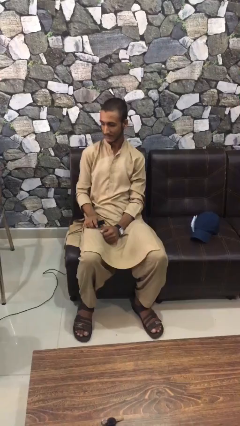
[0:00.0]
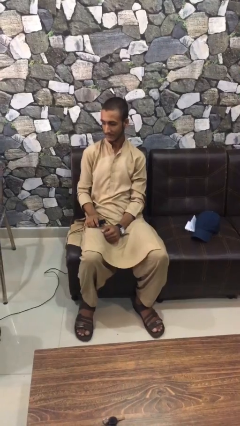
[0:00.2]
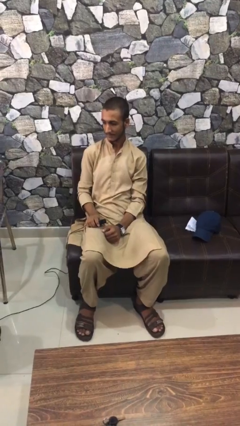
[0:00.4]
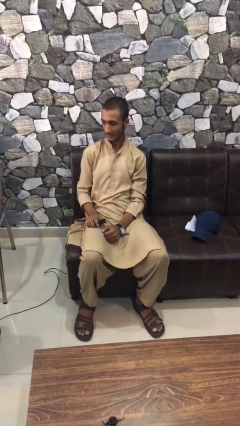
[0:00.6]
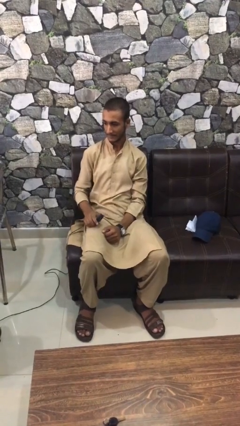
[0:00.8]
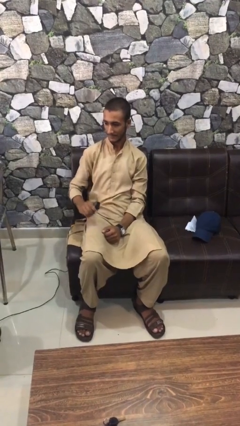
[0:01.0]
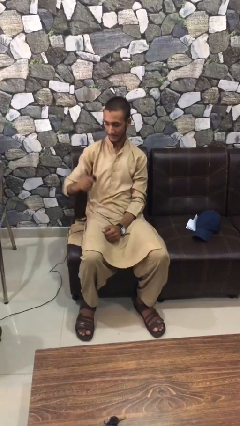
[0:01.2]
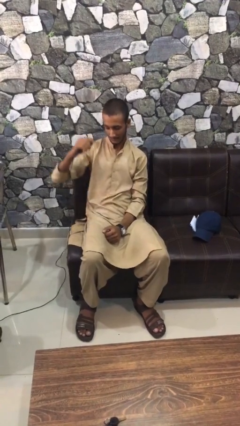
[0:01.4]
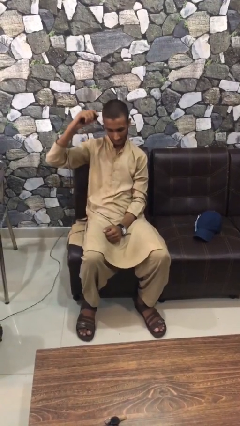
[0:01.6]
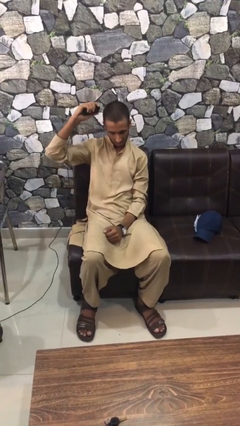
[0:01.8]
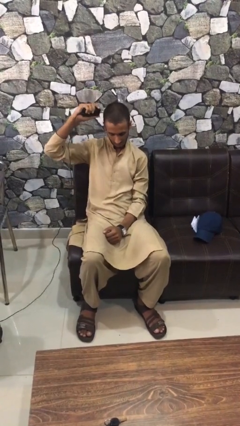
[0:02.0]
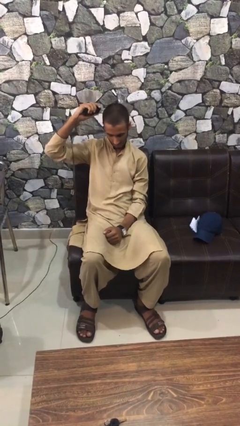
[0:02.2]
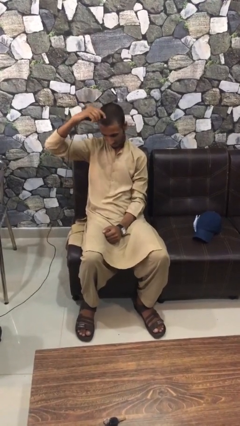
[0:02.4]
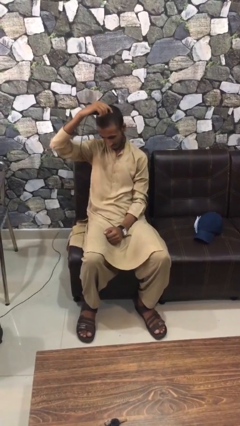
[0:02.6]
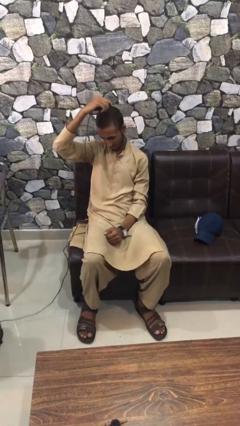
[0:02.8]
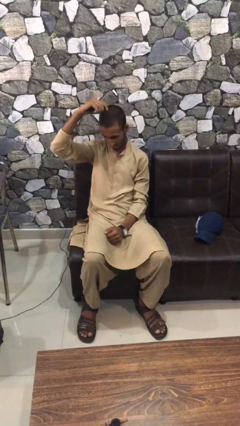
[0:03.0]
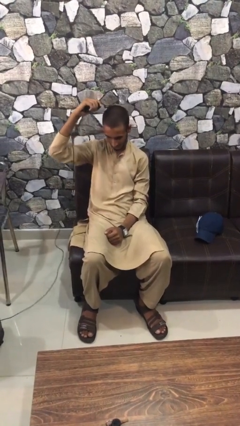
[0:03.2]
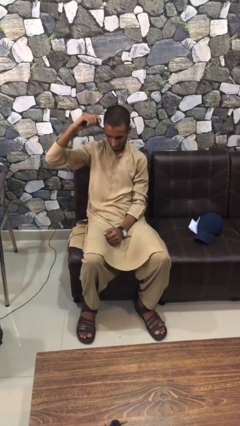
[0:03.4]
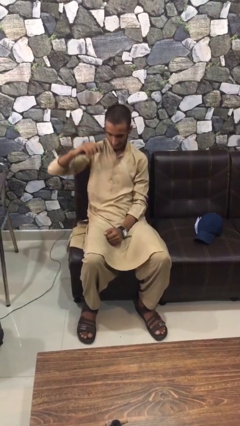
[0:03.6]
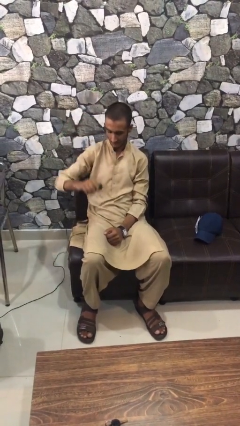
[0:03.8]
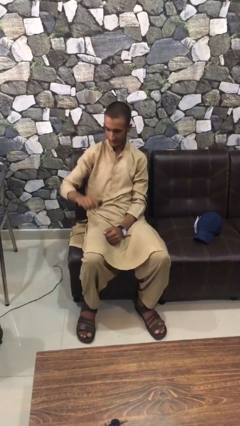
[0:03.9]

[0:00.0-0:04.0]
person dries hair with hairdryer

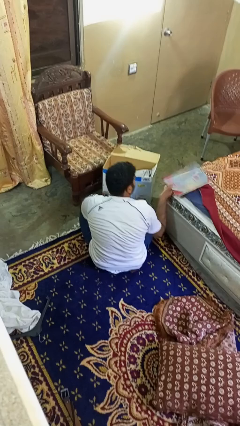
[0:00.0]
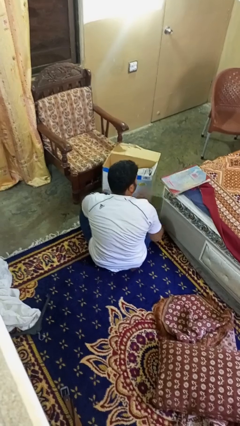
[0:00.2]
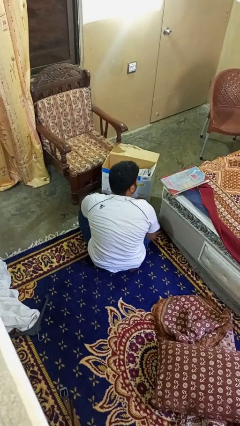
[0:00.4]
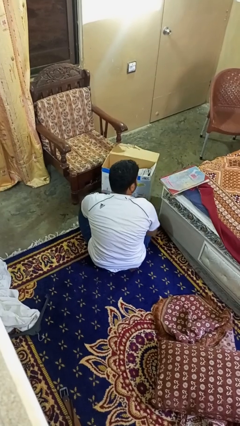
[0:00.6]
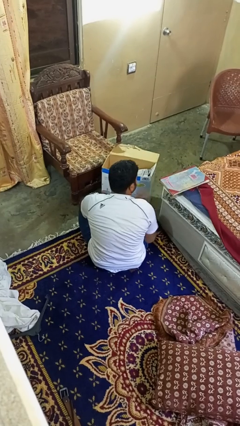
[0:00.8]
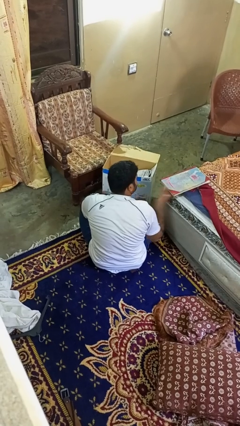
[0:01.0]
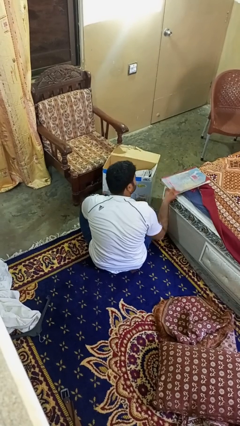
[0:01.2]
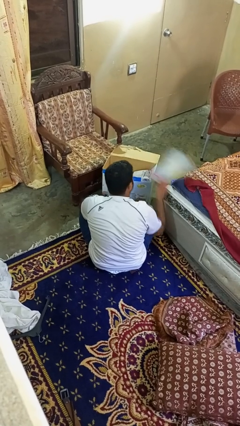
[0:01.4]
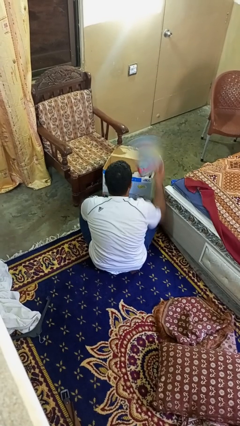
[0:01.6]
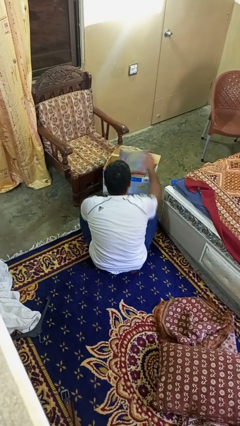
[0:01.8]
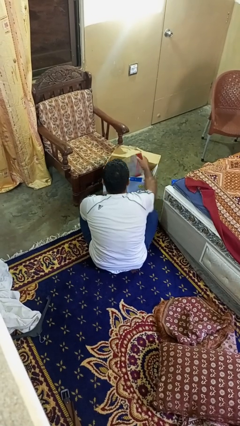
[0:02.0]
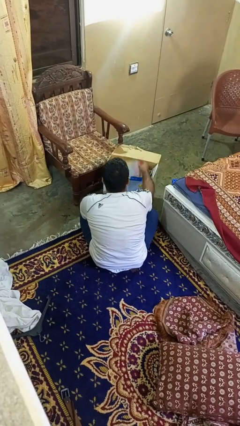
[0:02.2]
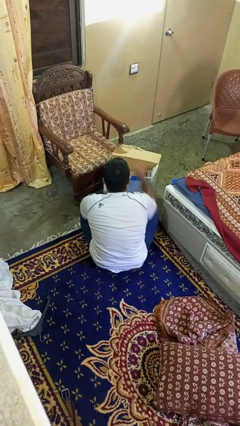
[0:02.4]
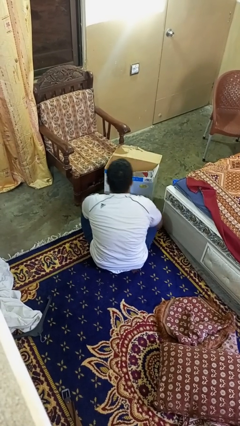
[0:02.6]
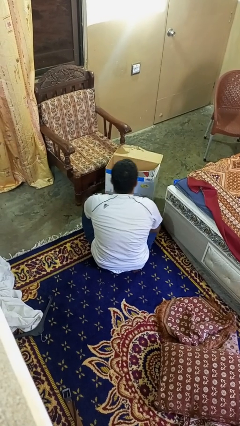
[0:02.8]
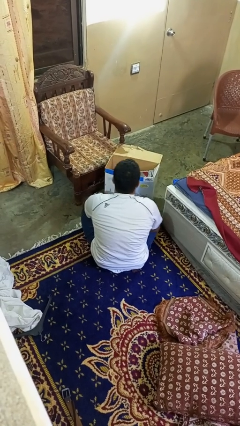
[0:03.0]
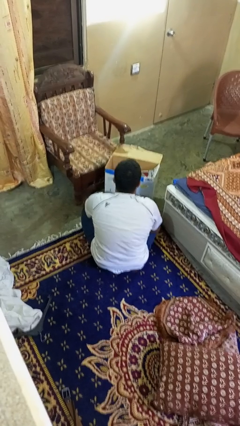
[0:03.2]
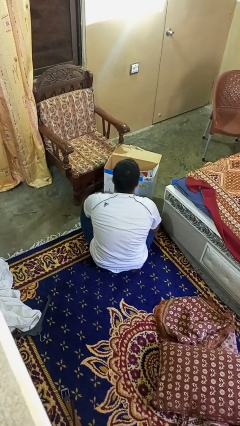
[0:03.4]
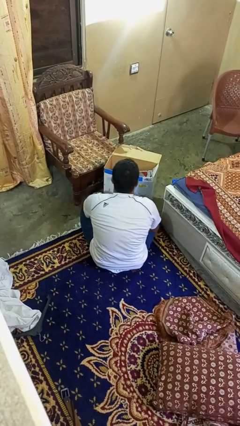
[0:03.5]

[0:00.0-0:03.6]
person puts object into box

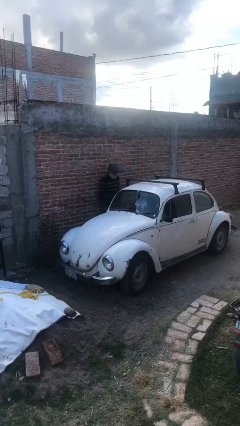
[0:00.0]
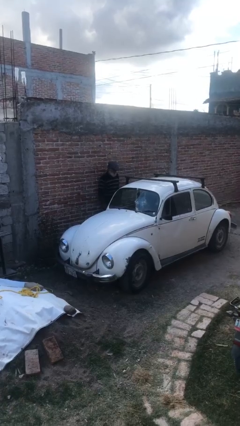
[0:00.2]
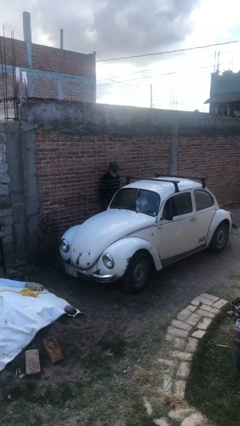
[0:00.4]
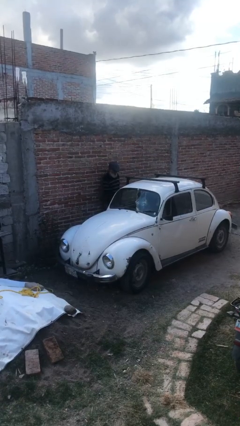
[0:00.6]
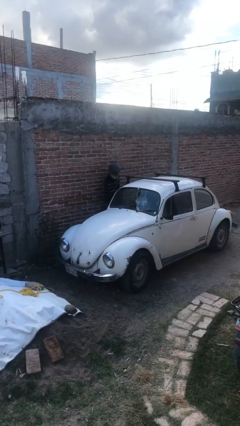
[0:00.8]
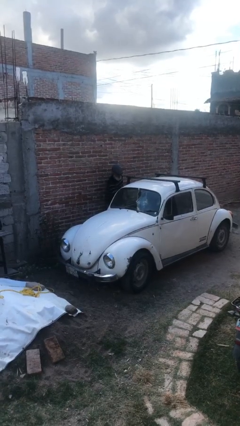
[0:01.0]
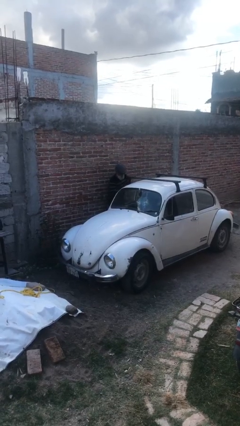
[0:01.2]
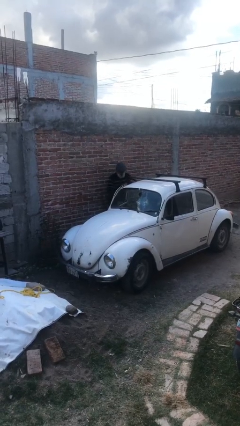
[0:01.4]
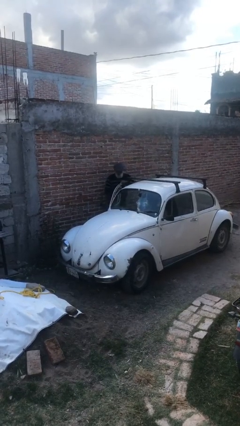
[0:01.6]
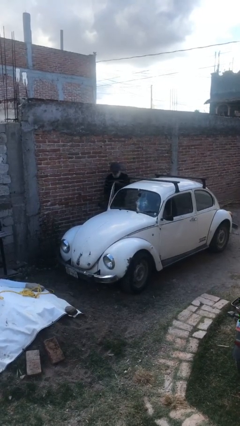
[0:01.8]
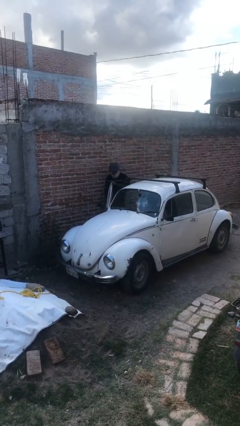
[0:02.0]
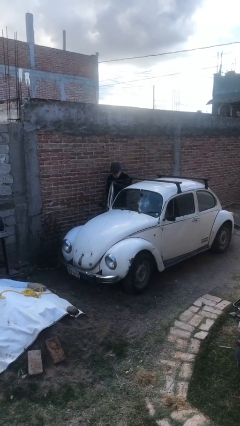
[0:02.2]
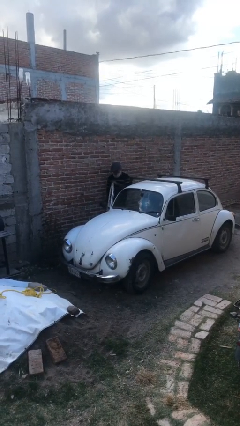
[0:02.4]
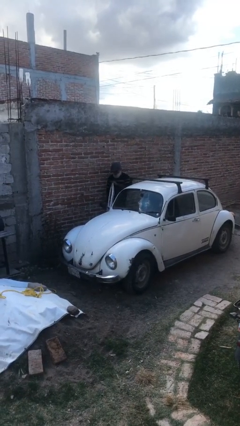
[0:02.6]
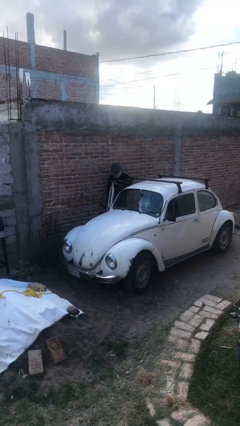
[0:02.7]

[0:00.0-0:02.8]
person opens car door

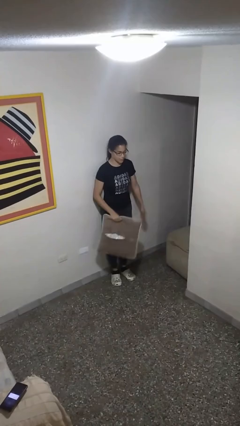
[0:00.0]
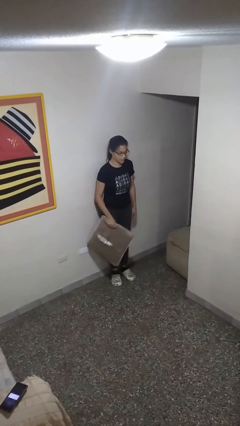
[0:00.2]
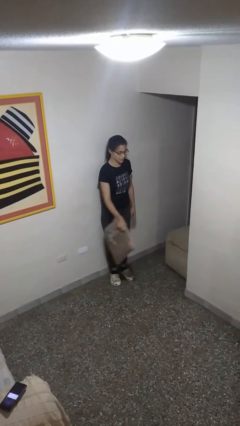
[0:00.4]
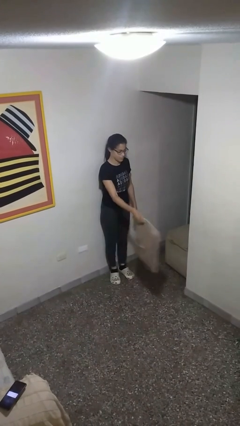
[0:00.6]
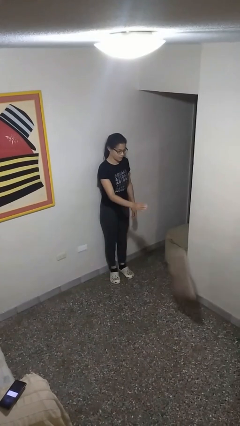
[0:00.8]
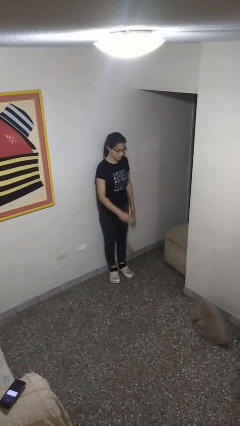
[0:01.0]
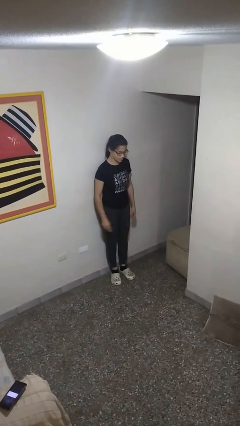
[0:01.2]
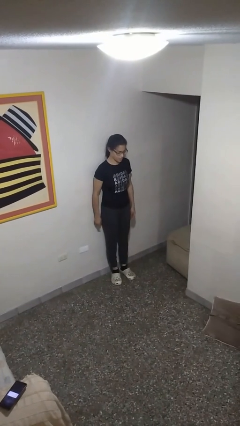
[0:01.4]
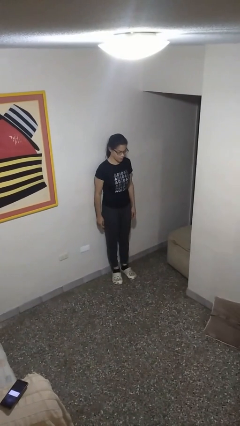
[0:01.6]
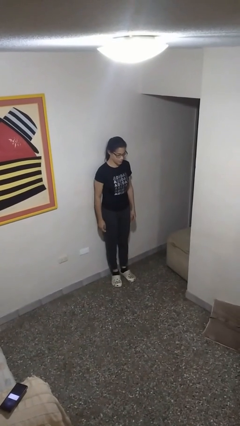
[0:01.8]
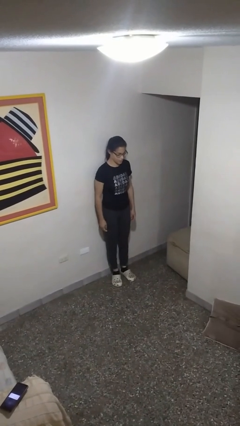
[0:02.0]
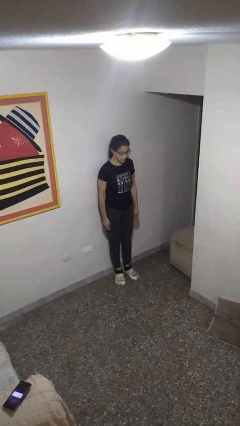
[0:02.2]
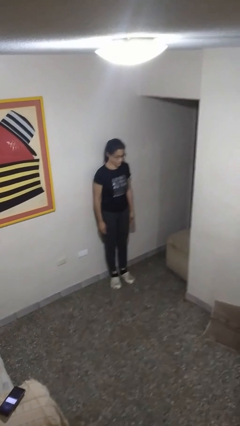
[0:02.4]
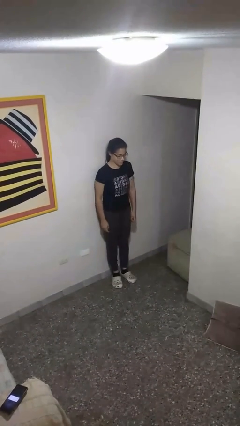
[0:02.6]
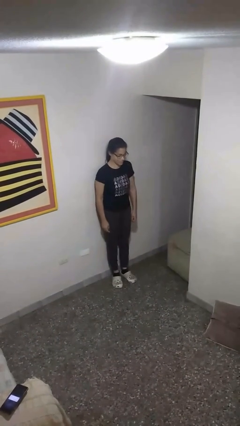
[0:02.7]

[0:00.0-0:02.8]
person throws object to ground

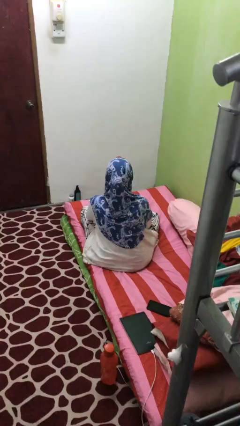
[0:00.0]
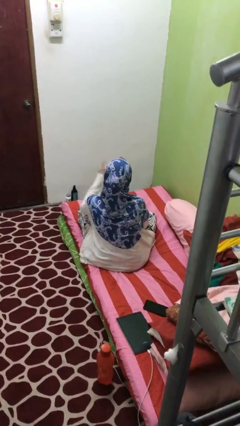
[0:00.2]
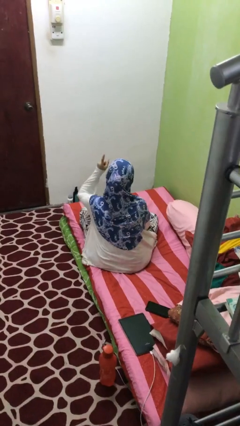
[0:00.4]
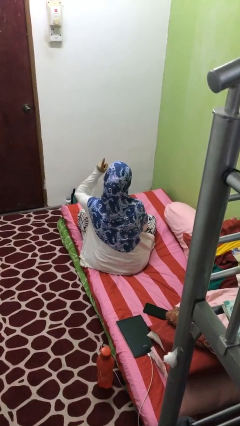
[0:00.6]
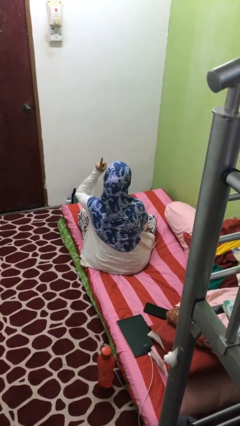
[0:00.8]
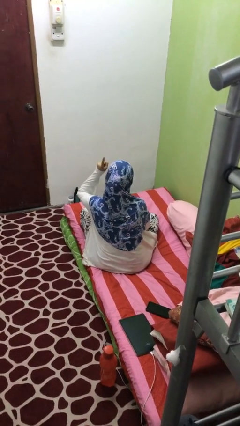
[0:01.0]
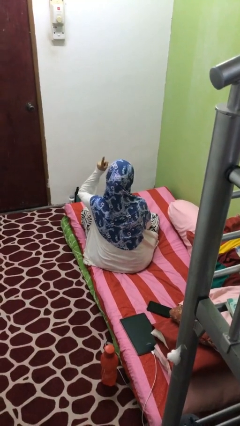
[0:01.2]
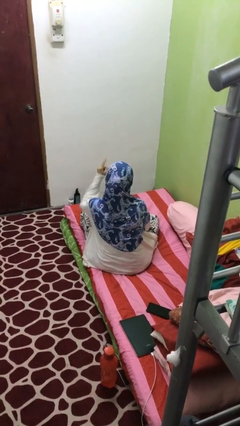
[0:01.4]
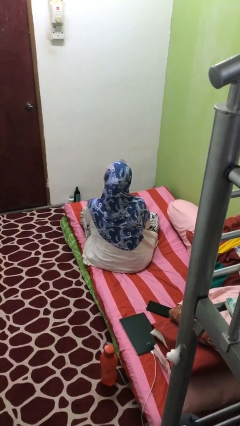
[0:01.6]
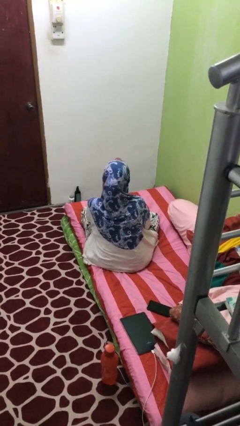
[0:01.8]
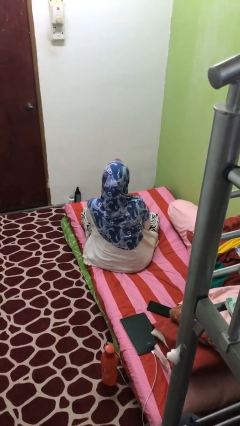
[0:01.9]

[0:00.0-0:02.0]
person gestures number one

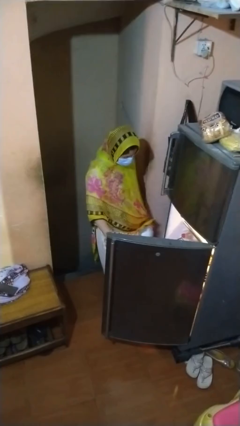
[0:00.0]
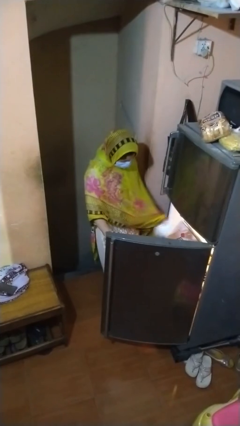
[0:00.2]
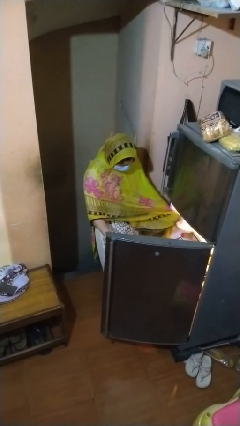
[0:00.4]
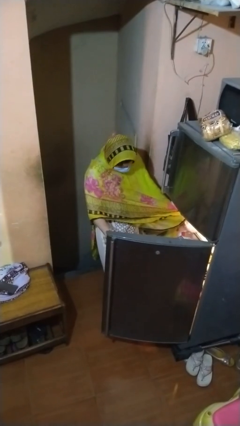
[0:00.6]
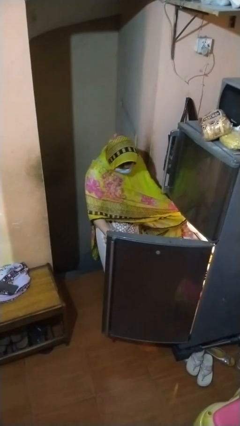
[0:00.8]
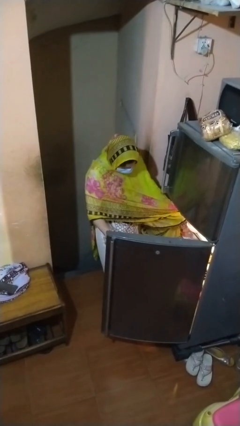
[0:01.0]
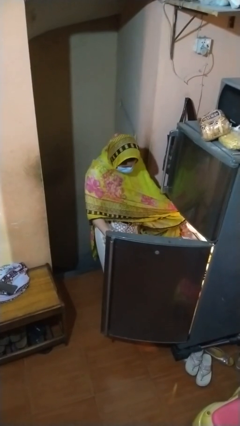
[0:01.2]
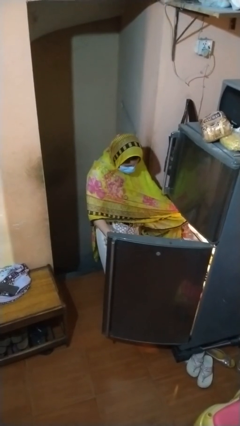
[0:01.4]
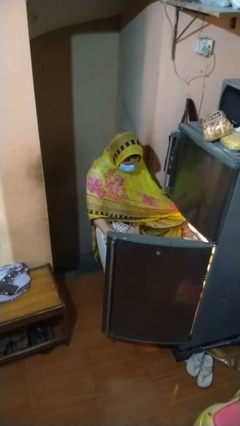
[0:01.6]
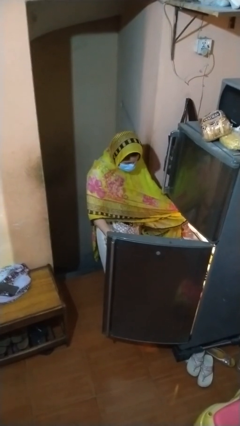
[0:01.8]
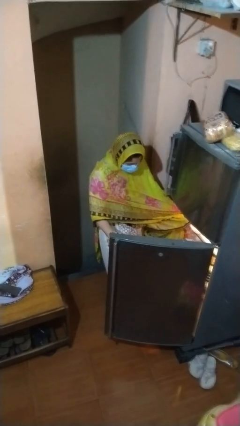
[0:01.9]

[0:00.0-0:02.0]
person puts object into refrigerator

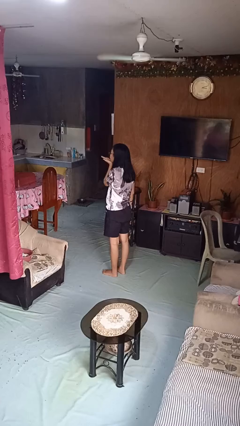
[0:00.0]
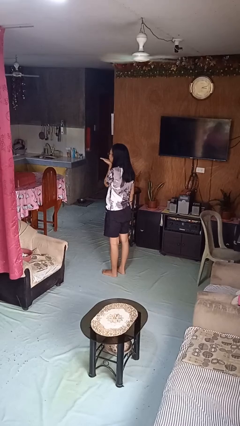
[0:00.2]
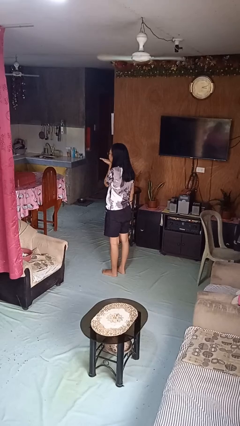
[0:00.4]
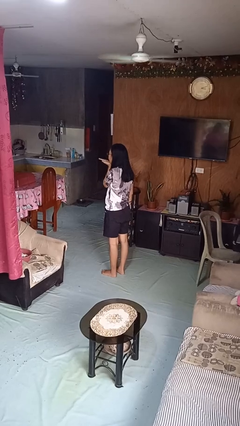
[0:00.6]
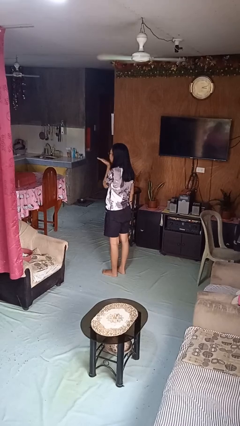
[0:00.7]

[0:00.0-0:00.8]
person gestures blow kiss
